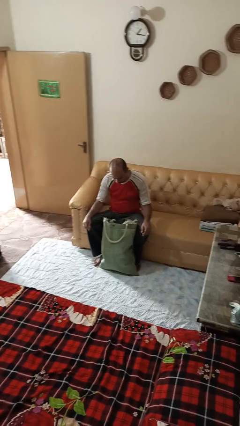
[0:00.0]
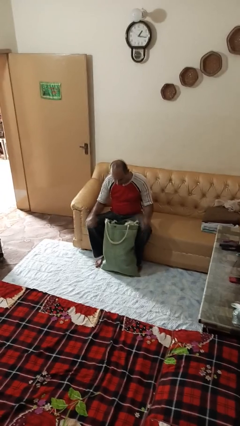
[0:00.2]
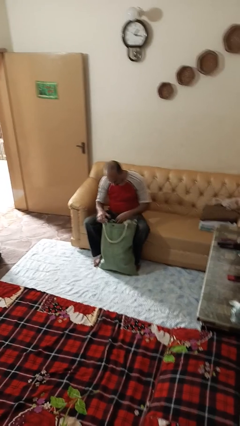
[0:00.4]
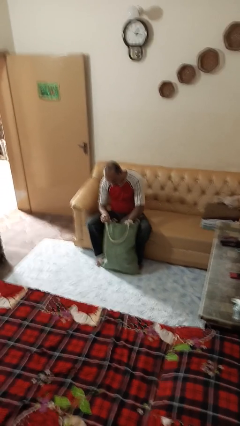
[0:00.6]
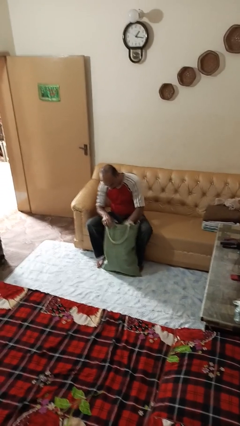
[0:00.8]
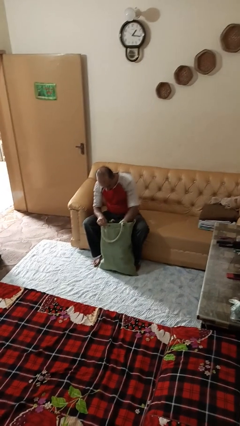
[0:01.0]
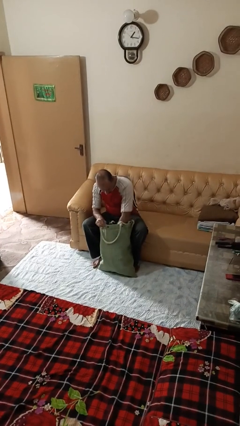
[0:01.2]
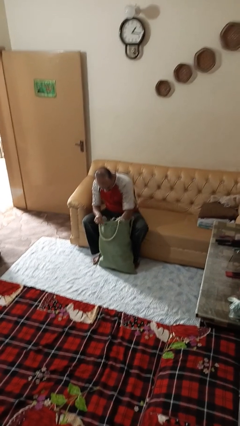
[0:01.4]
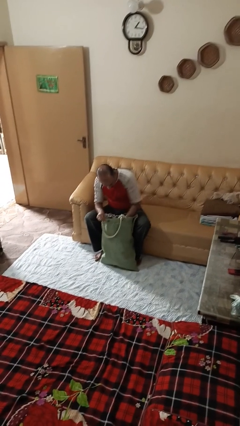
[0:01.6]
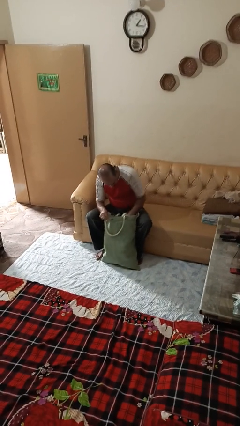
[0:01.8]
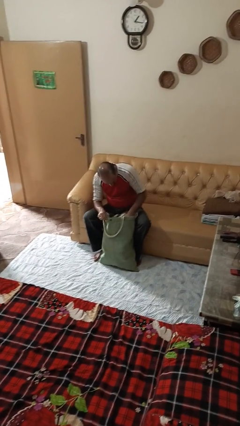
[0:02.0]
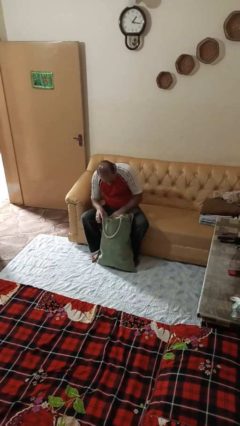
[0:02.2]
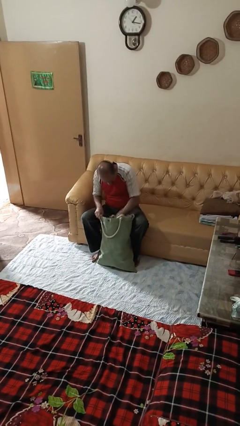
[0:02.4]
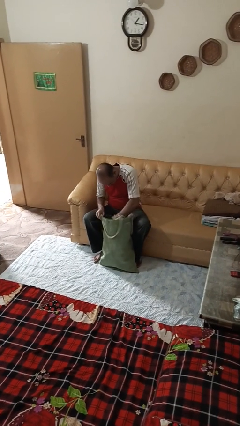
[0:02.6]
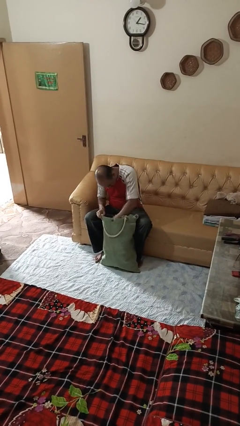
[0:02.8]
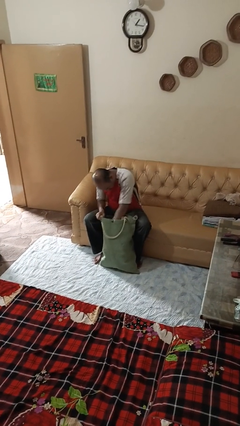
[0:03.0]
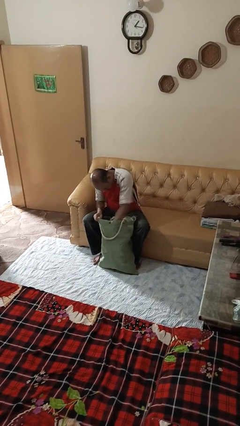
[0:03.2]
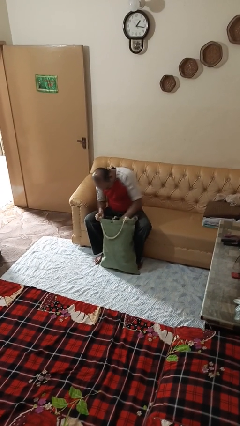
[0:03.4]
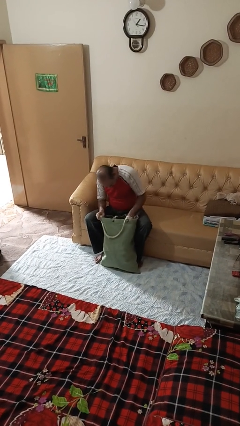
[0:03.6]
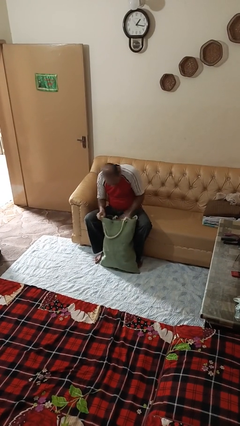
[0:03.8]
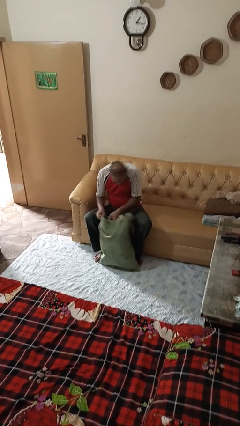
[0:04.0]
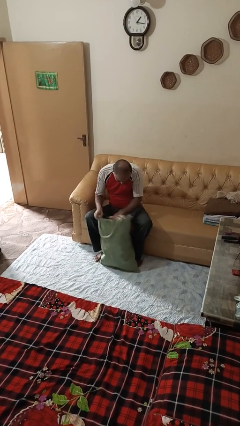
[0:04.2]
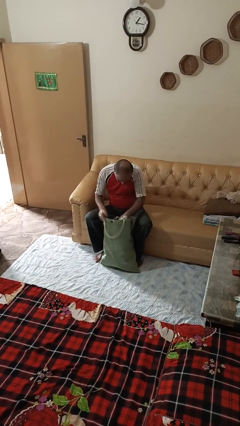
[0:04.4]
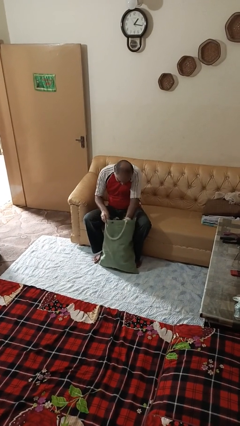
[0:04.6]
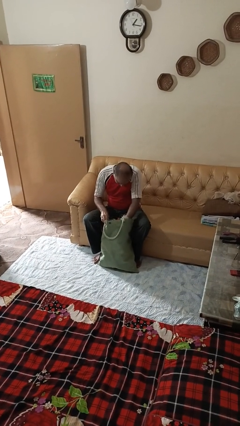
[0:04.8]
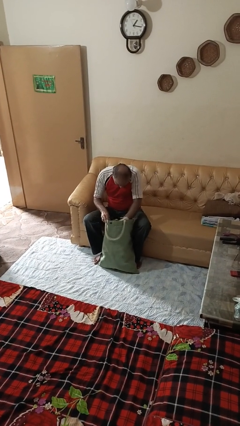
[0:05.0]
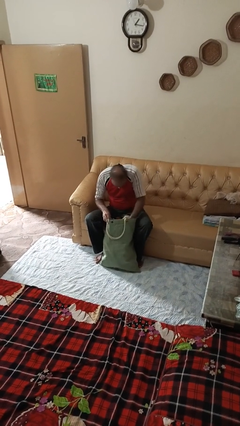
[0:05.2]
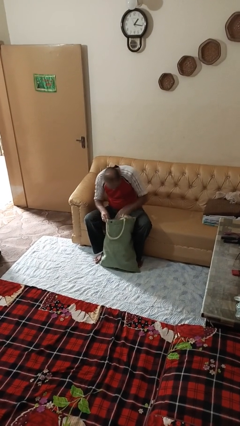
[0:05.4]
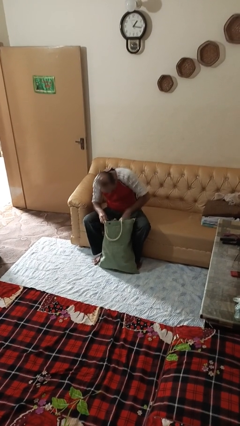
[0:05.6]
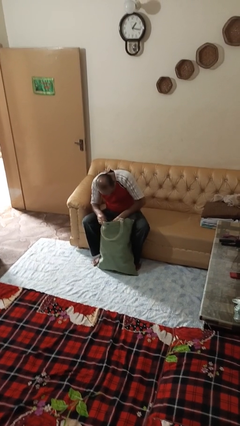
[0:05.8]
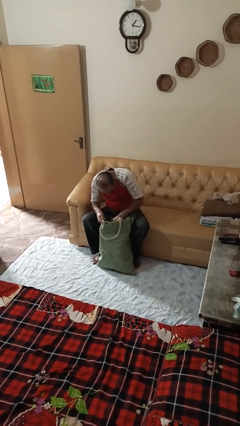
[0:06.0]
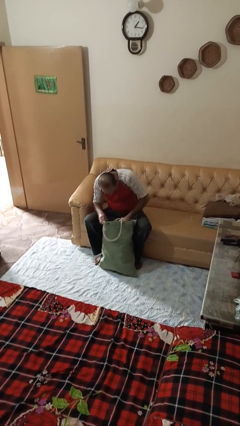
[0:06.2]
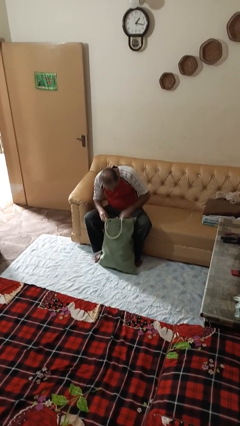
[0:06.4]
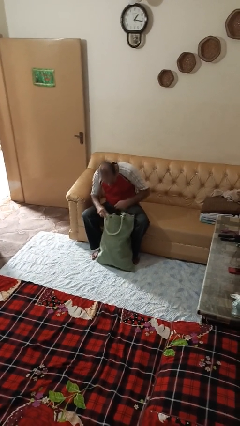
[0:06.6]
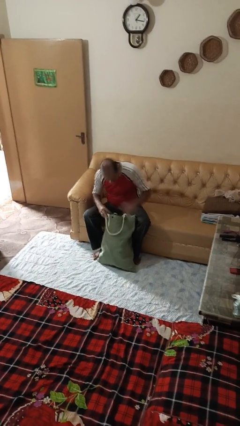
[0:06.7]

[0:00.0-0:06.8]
person searches in bag

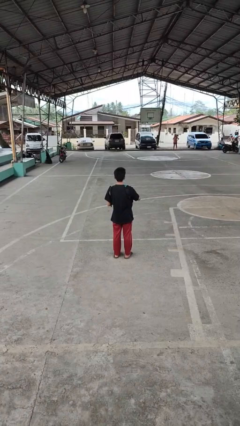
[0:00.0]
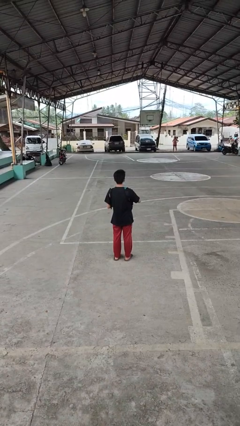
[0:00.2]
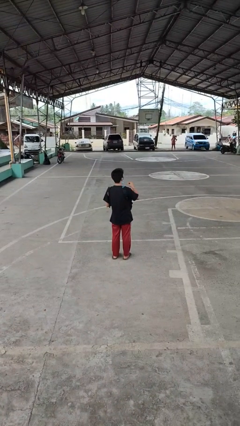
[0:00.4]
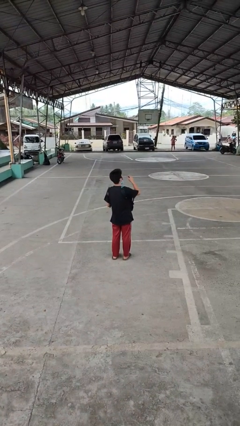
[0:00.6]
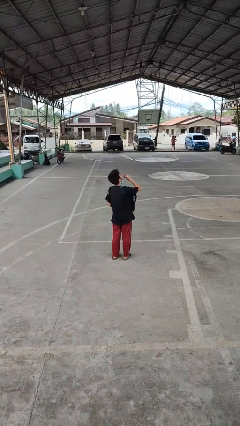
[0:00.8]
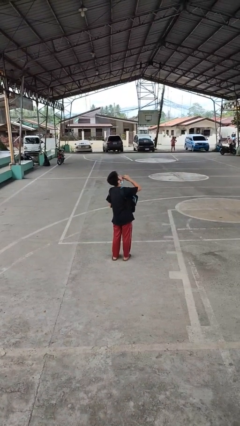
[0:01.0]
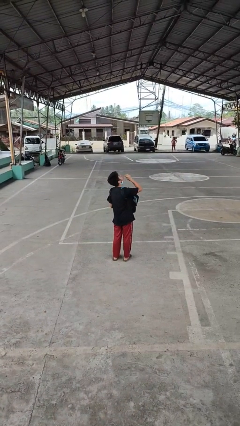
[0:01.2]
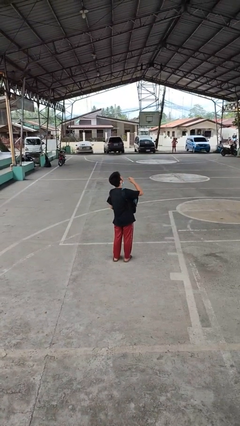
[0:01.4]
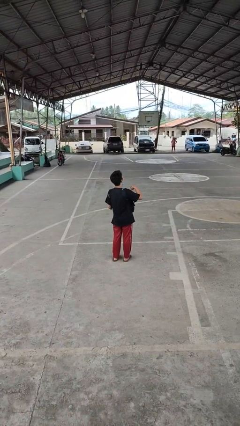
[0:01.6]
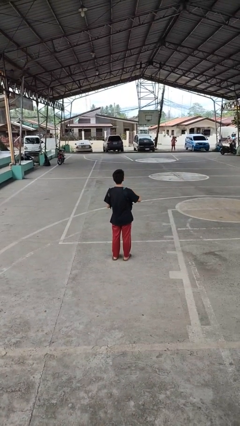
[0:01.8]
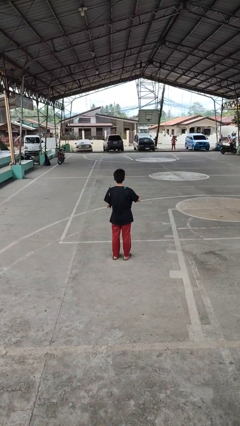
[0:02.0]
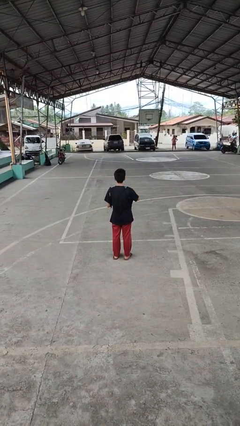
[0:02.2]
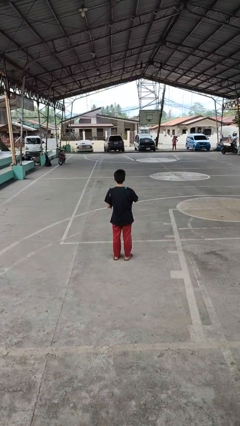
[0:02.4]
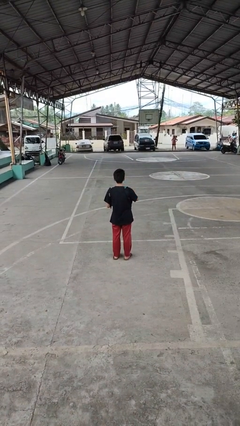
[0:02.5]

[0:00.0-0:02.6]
person eats snack from bag

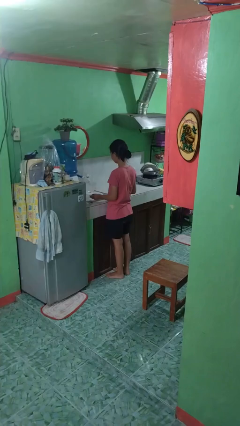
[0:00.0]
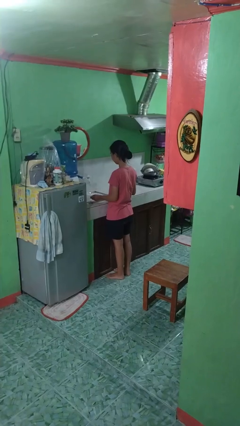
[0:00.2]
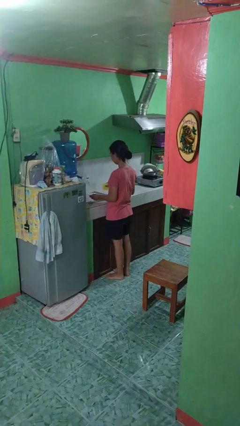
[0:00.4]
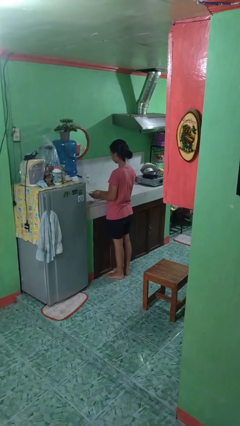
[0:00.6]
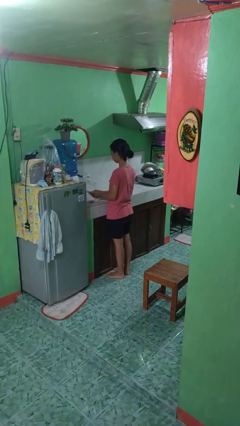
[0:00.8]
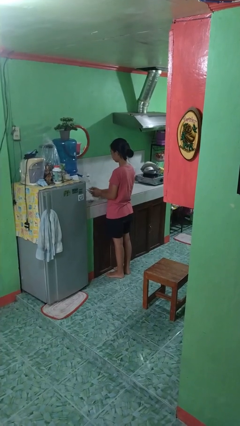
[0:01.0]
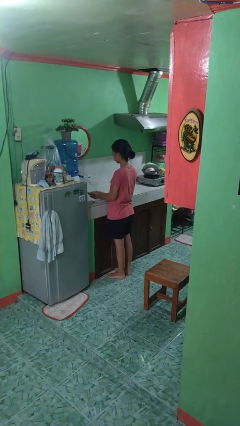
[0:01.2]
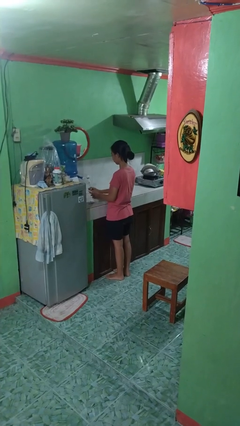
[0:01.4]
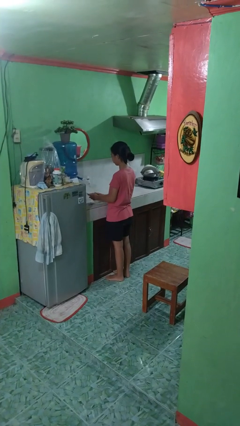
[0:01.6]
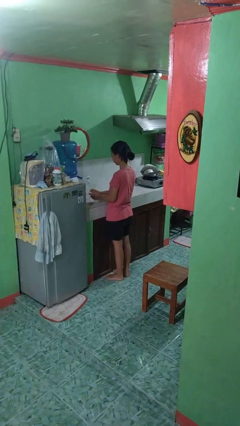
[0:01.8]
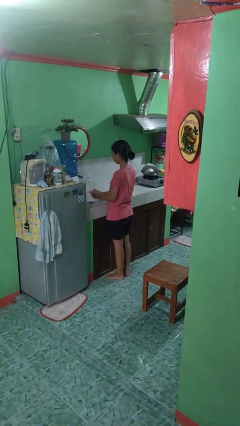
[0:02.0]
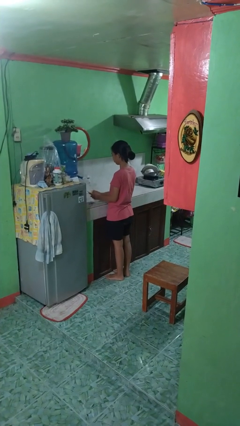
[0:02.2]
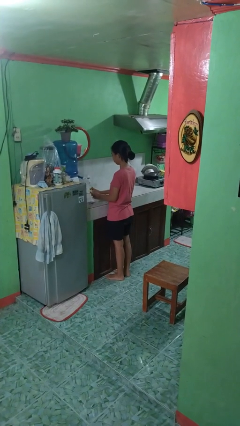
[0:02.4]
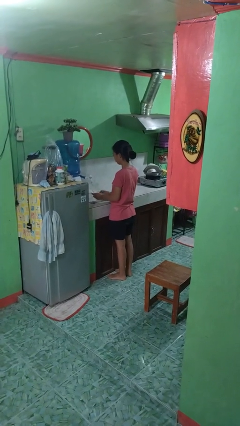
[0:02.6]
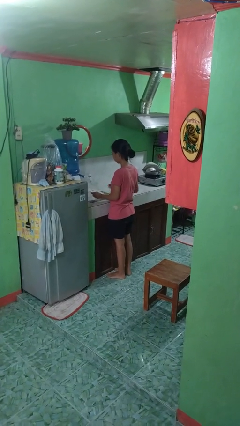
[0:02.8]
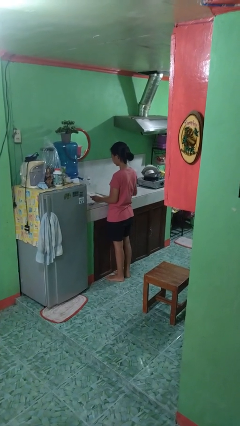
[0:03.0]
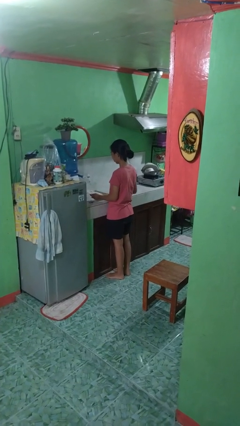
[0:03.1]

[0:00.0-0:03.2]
person washes dish

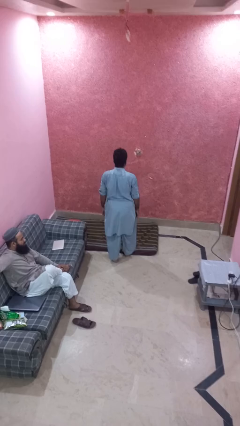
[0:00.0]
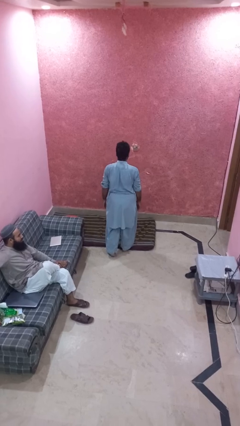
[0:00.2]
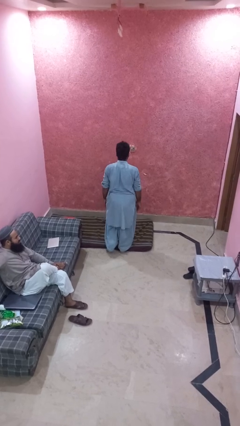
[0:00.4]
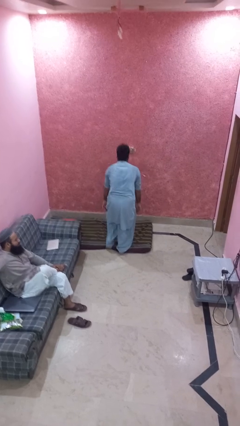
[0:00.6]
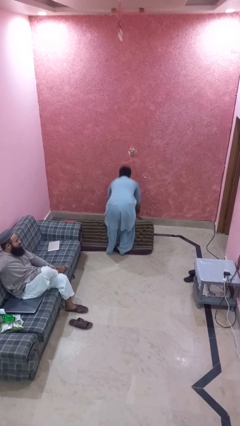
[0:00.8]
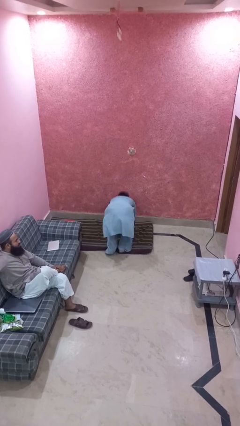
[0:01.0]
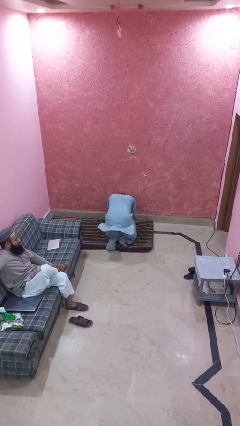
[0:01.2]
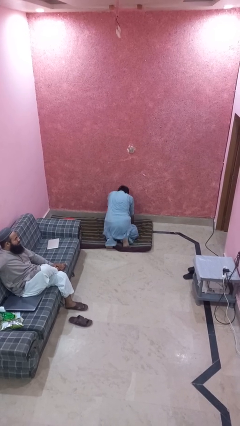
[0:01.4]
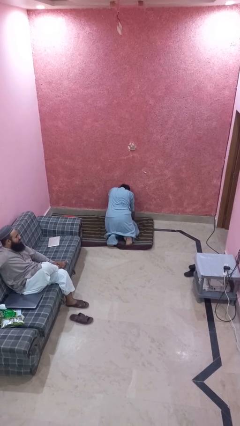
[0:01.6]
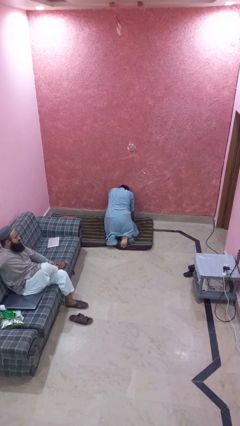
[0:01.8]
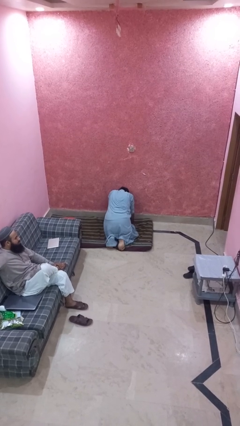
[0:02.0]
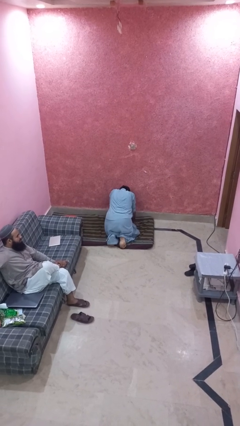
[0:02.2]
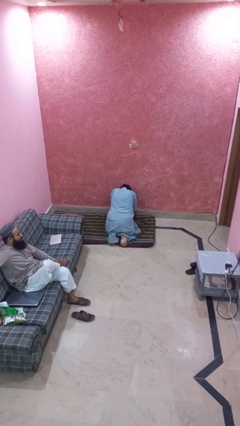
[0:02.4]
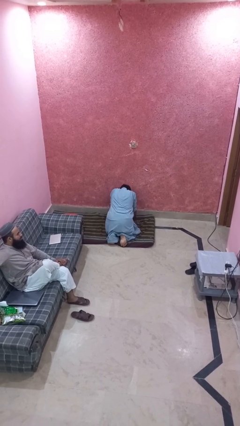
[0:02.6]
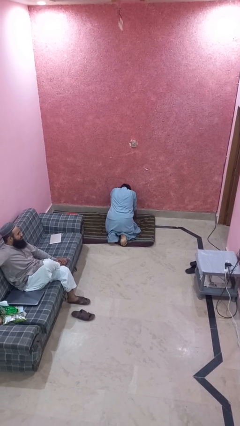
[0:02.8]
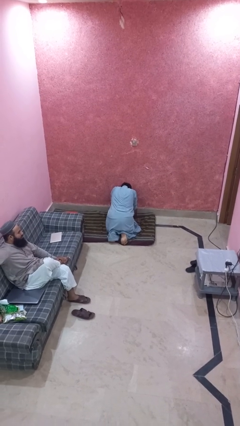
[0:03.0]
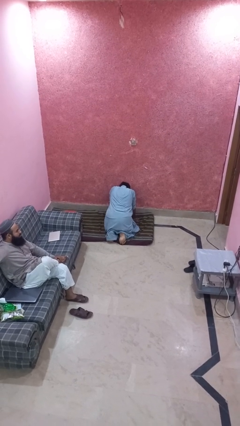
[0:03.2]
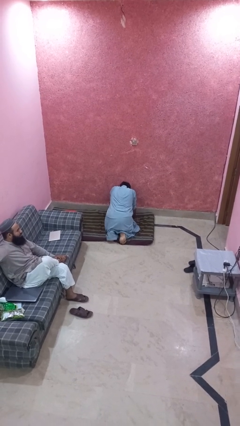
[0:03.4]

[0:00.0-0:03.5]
person trips on object on floor

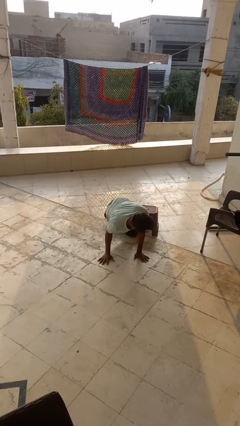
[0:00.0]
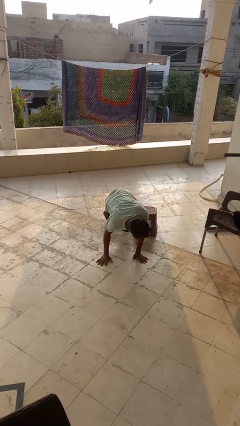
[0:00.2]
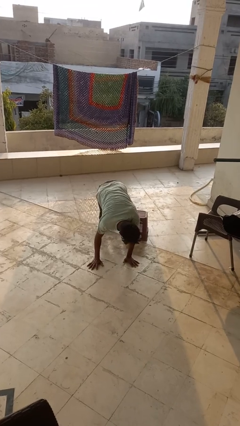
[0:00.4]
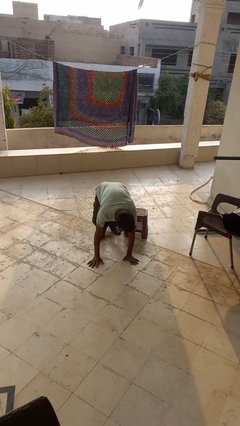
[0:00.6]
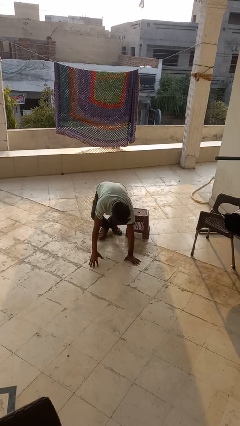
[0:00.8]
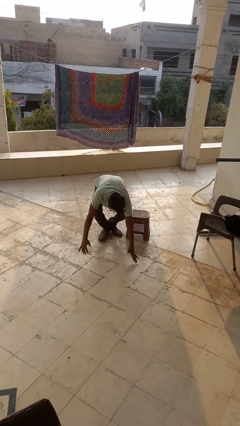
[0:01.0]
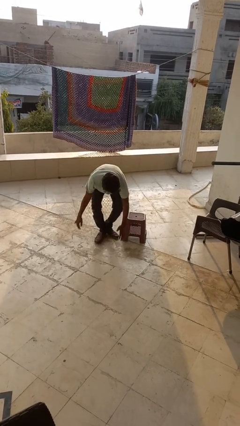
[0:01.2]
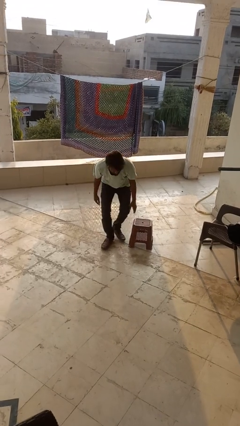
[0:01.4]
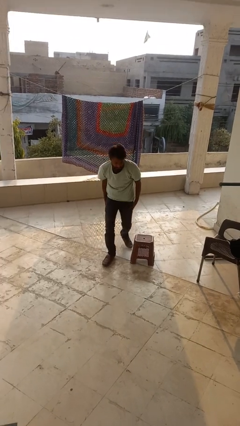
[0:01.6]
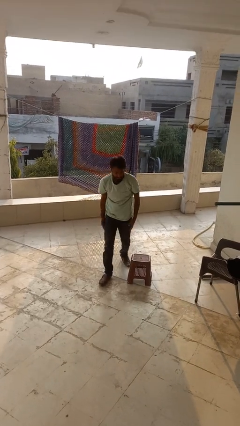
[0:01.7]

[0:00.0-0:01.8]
person stands up from floor
